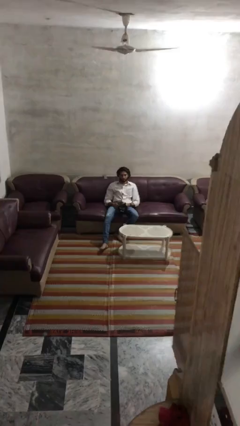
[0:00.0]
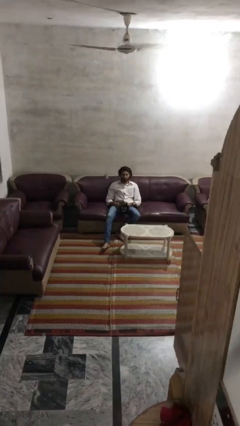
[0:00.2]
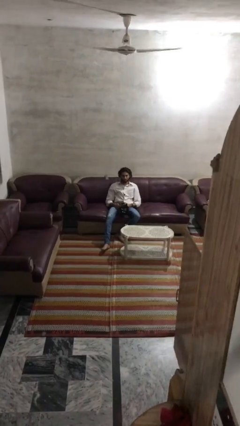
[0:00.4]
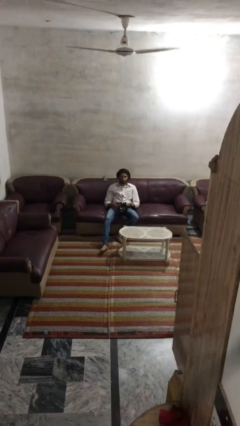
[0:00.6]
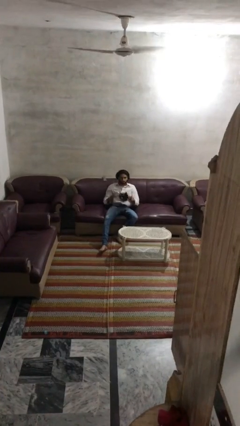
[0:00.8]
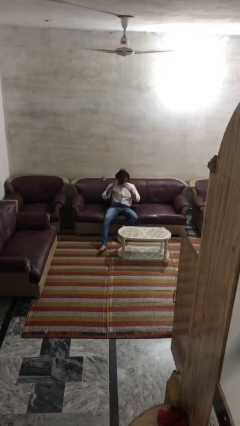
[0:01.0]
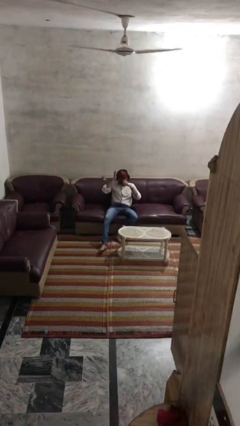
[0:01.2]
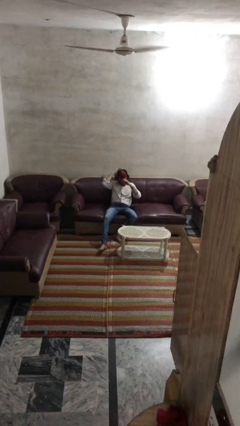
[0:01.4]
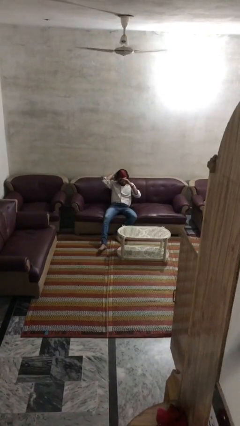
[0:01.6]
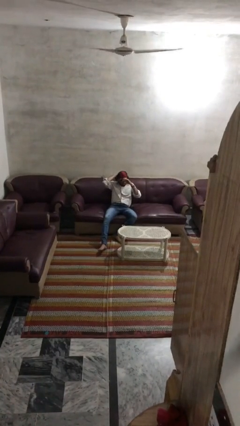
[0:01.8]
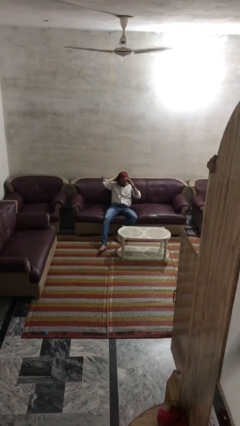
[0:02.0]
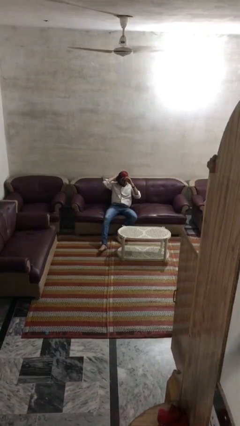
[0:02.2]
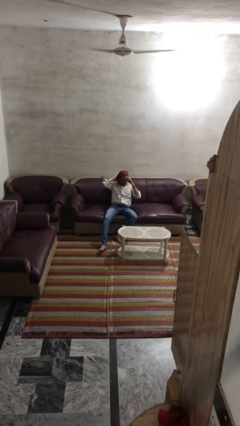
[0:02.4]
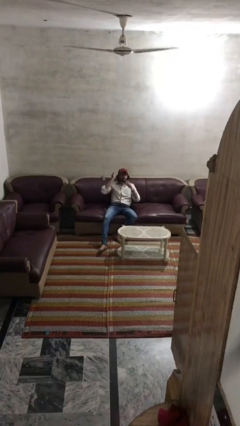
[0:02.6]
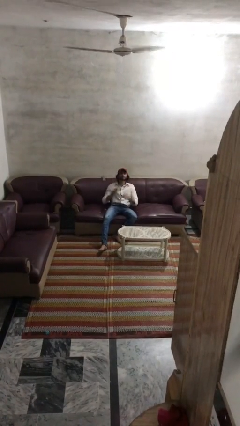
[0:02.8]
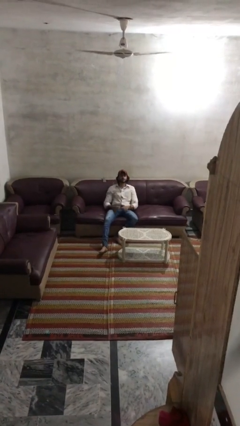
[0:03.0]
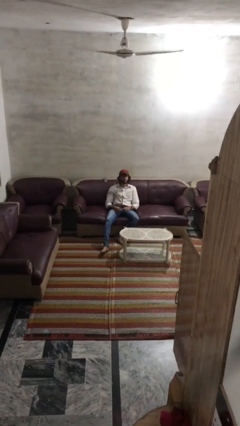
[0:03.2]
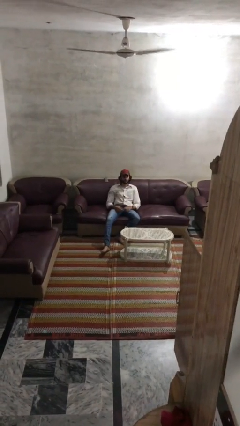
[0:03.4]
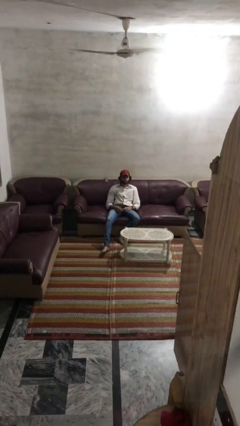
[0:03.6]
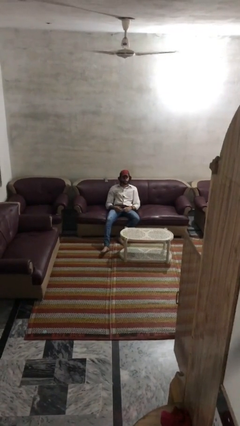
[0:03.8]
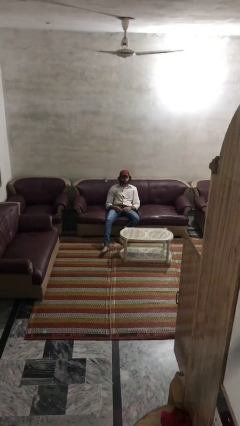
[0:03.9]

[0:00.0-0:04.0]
person puts on hat

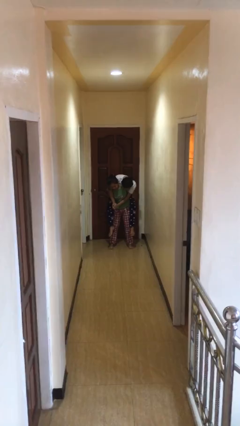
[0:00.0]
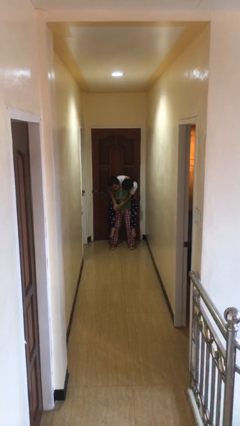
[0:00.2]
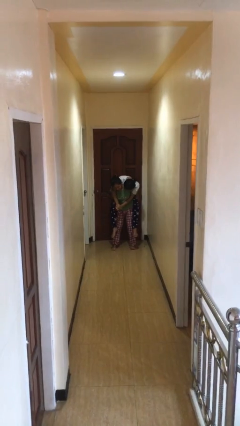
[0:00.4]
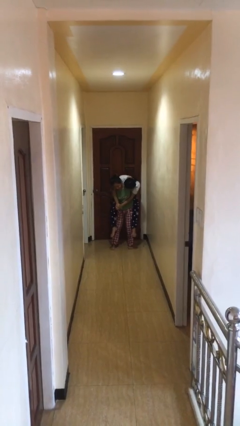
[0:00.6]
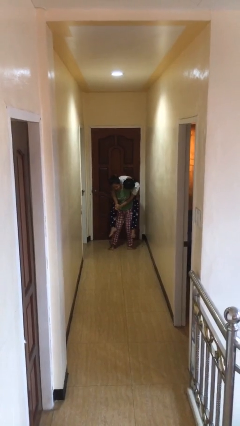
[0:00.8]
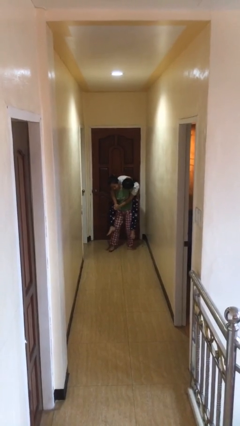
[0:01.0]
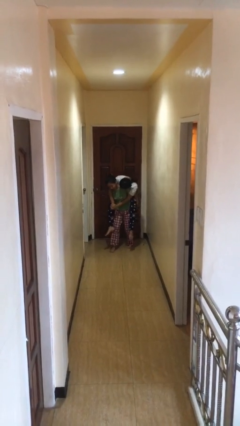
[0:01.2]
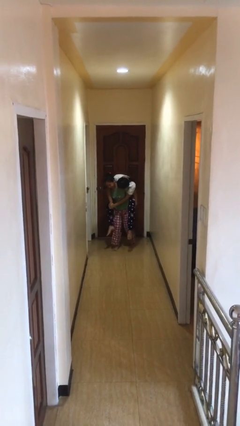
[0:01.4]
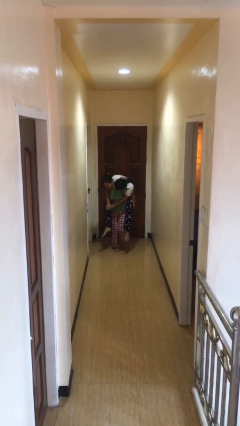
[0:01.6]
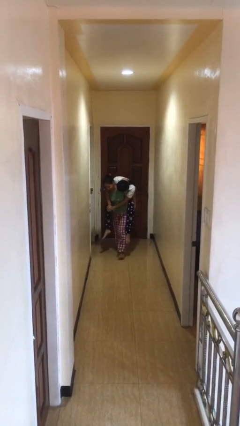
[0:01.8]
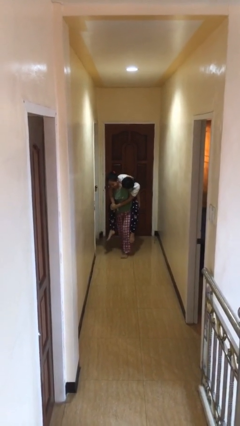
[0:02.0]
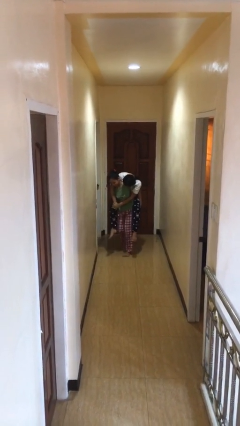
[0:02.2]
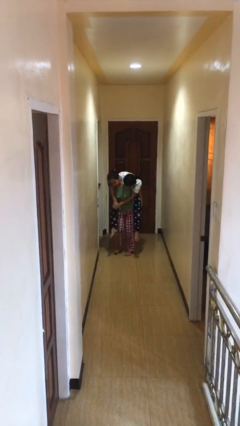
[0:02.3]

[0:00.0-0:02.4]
person carries person on back

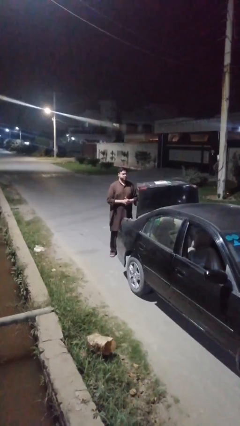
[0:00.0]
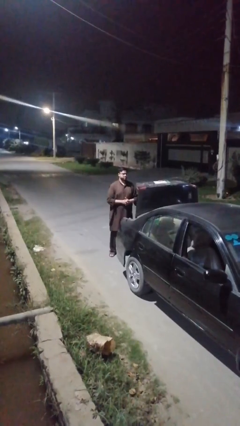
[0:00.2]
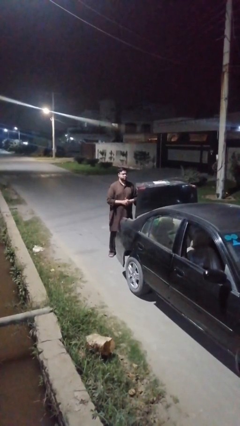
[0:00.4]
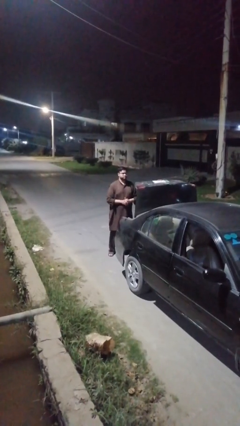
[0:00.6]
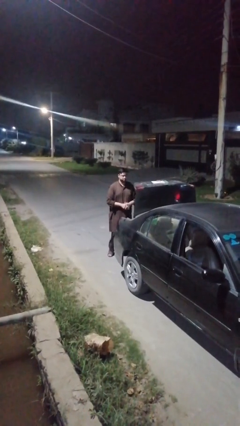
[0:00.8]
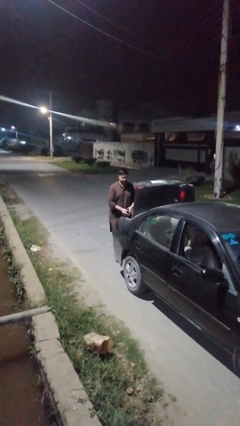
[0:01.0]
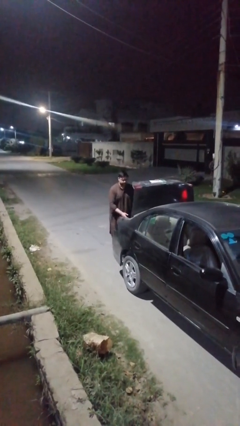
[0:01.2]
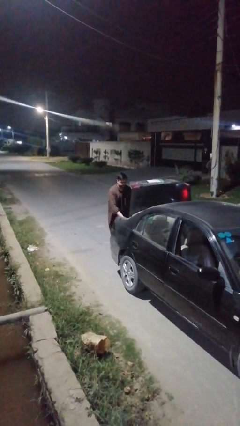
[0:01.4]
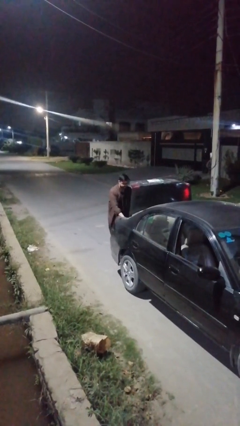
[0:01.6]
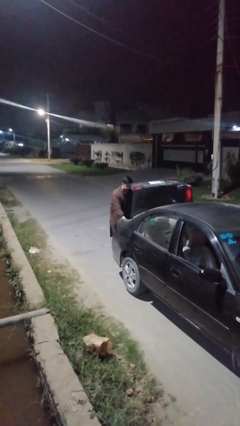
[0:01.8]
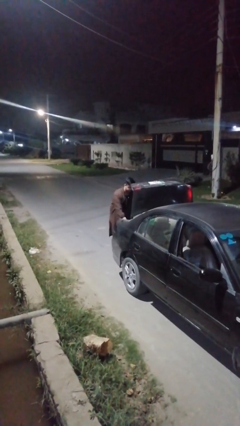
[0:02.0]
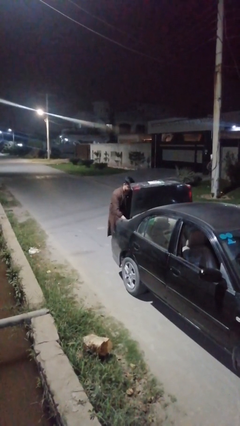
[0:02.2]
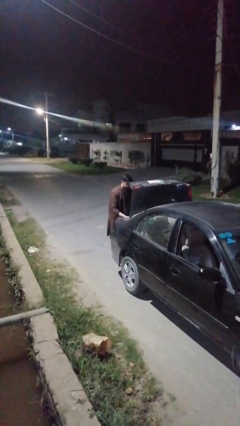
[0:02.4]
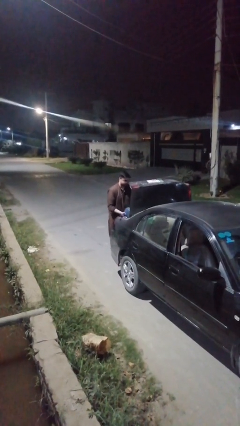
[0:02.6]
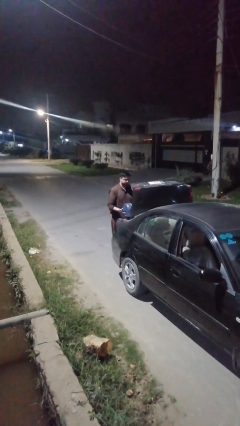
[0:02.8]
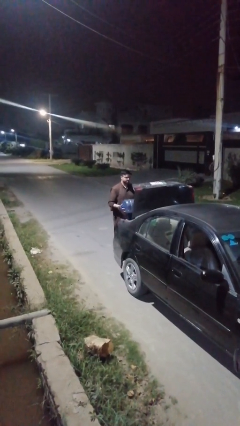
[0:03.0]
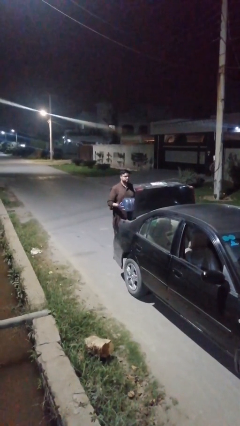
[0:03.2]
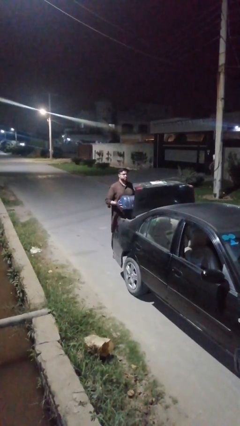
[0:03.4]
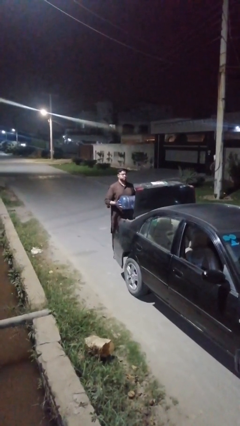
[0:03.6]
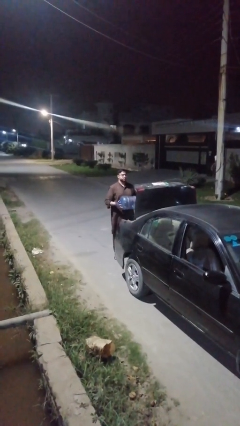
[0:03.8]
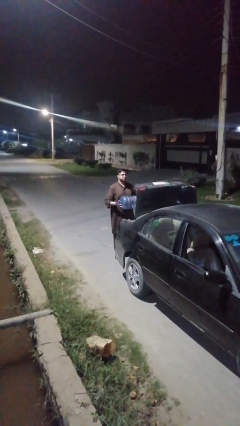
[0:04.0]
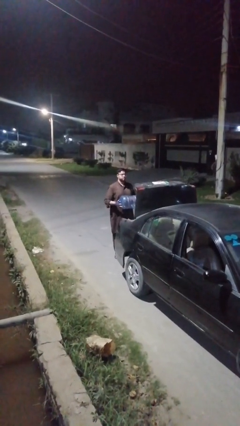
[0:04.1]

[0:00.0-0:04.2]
person unloads car

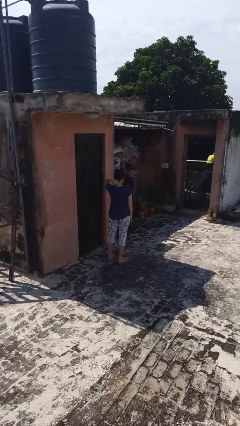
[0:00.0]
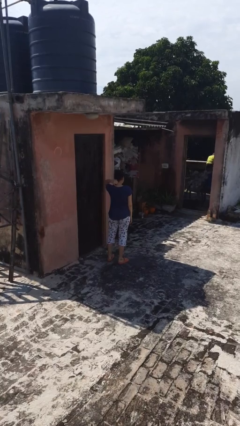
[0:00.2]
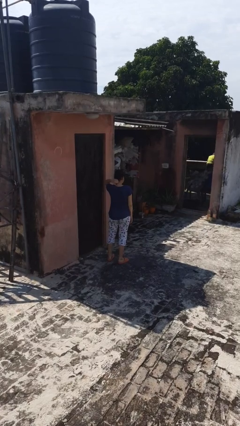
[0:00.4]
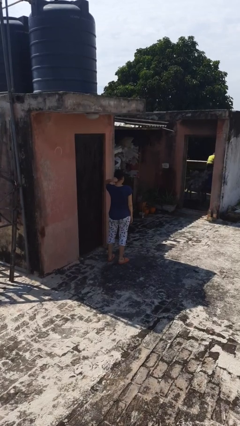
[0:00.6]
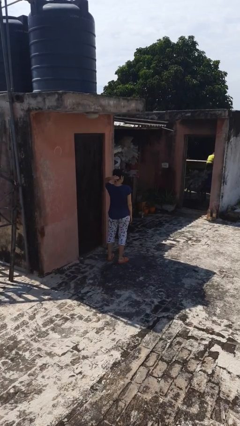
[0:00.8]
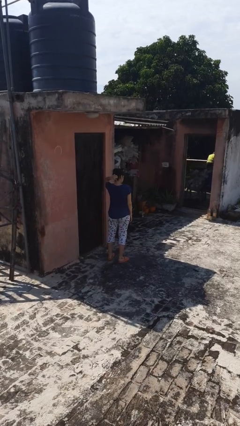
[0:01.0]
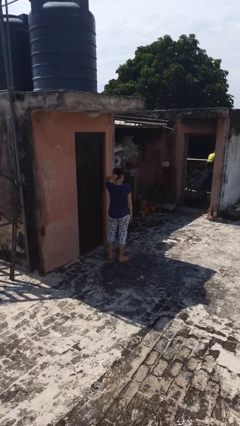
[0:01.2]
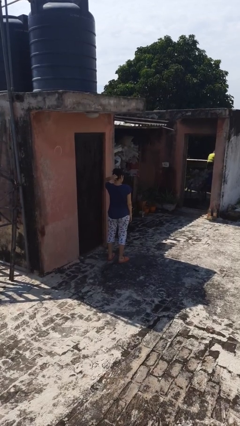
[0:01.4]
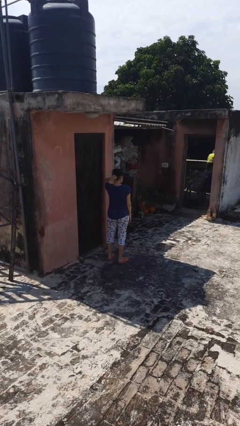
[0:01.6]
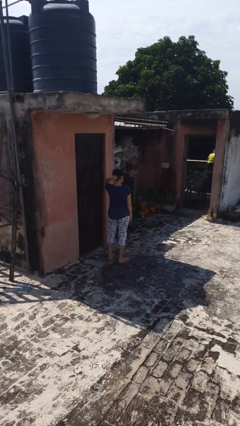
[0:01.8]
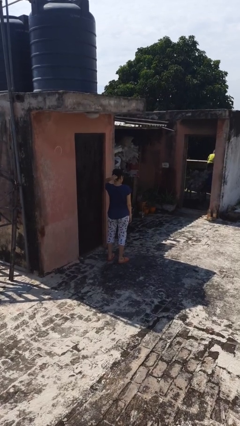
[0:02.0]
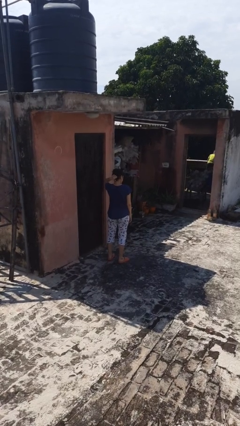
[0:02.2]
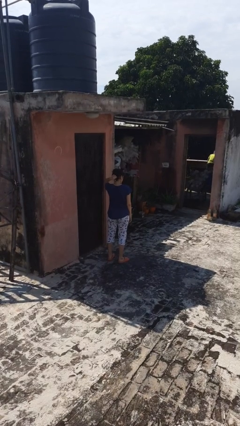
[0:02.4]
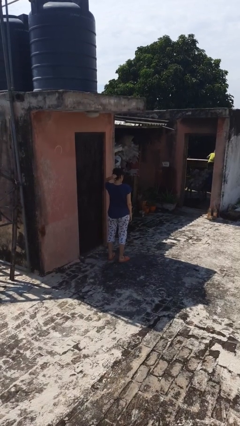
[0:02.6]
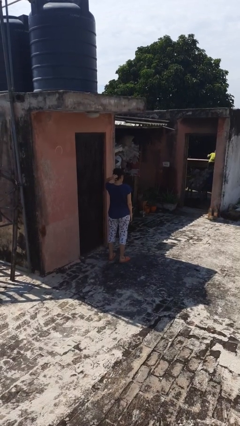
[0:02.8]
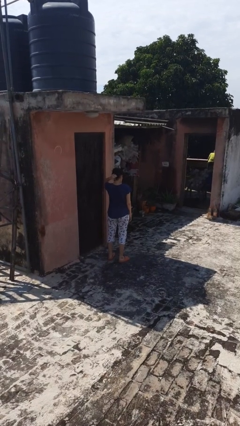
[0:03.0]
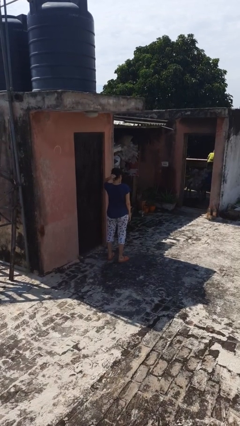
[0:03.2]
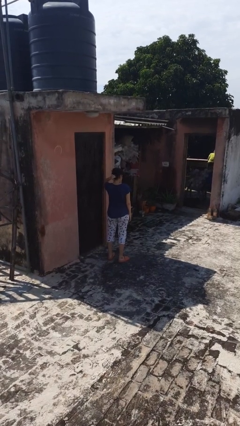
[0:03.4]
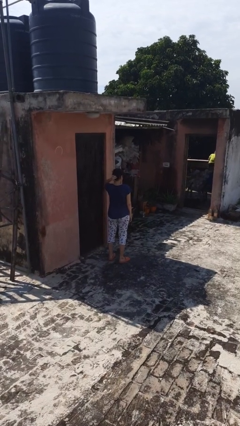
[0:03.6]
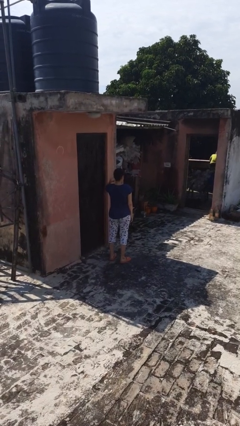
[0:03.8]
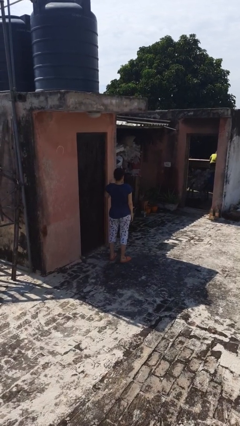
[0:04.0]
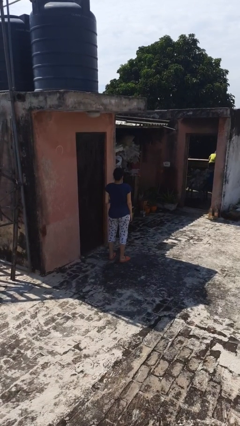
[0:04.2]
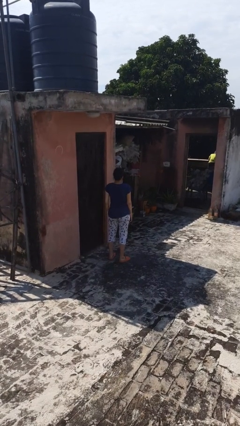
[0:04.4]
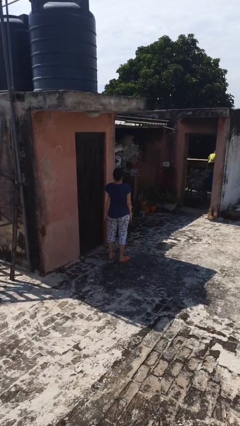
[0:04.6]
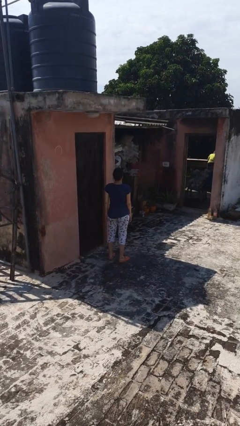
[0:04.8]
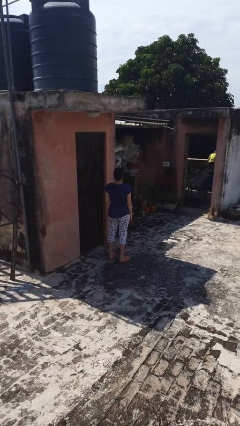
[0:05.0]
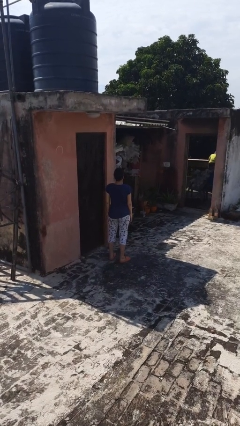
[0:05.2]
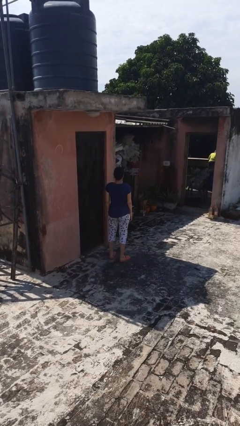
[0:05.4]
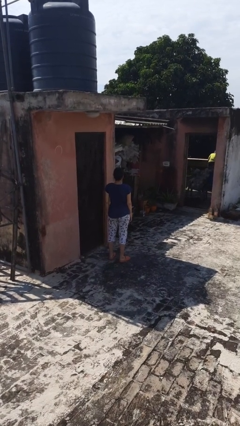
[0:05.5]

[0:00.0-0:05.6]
person scratches face

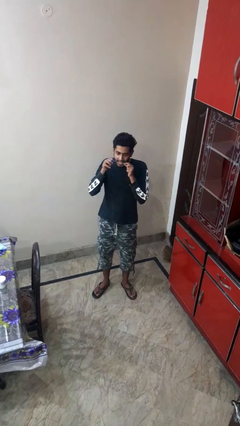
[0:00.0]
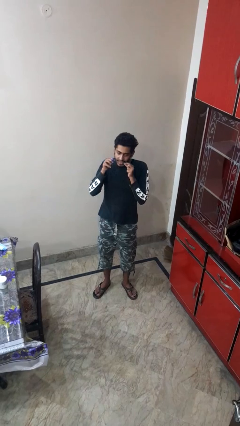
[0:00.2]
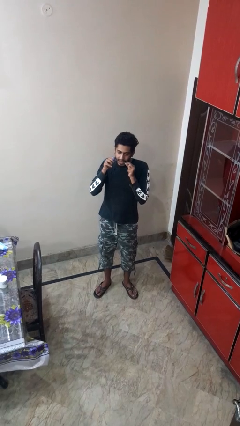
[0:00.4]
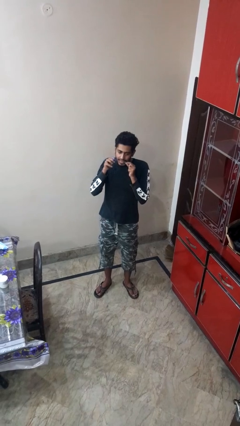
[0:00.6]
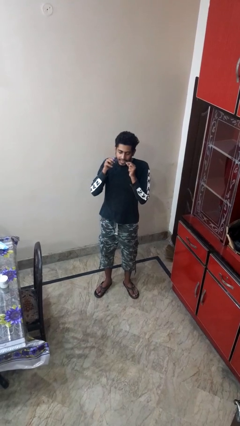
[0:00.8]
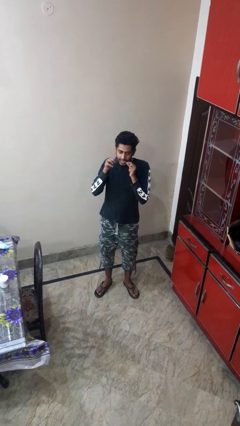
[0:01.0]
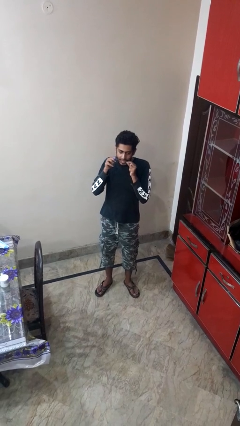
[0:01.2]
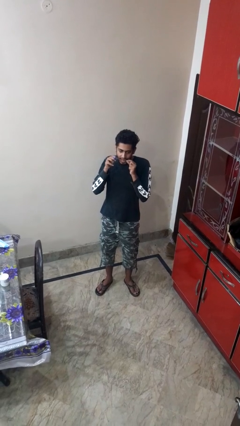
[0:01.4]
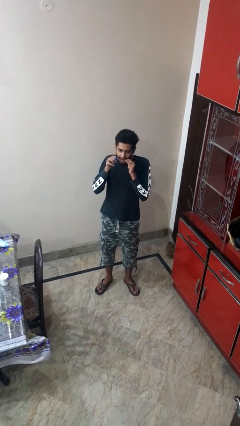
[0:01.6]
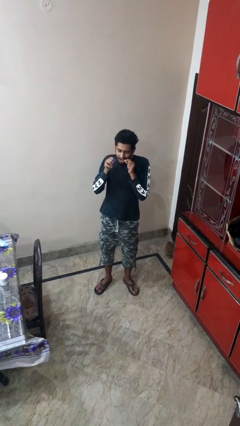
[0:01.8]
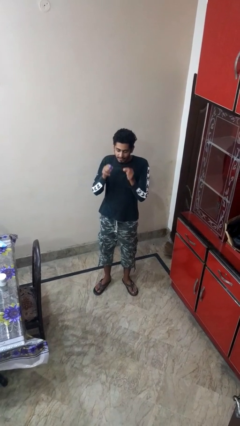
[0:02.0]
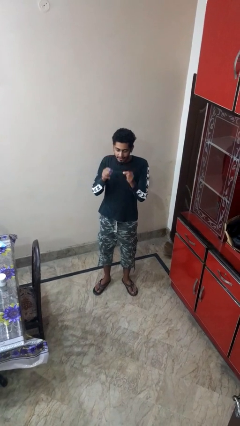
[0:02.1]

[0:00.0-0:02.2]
person flosses
